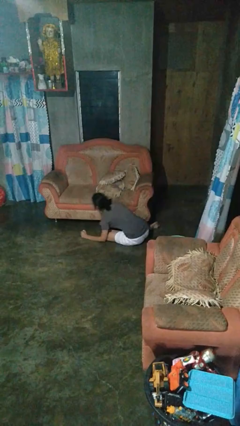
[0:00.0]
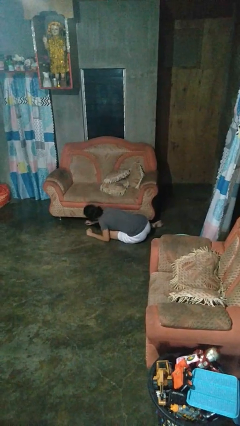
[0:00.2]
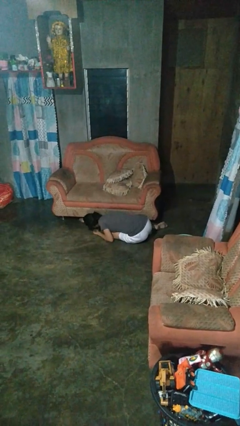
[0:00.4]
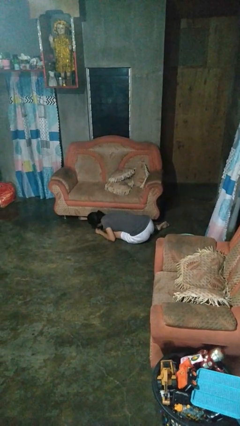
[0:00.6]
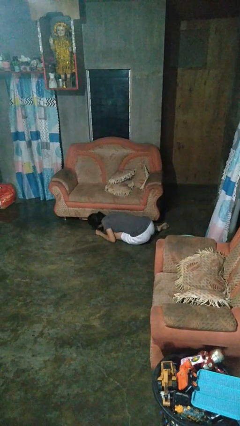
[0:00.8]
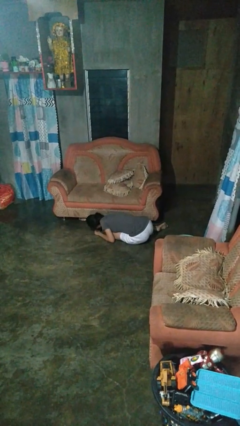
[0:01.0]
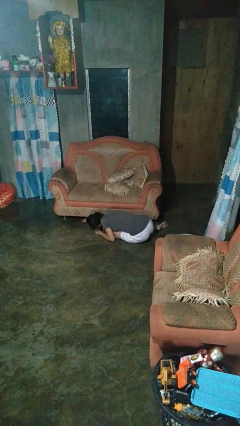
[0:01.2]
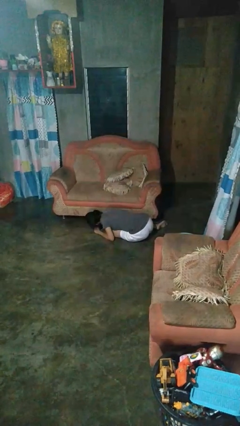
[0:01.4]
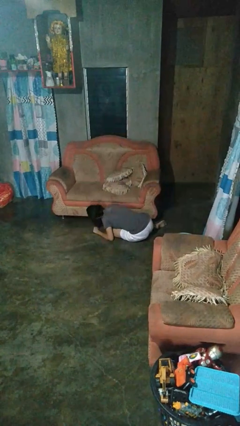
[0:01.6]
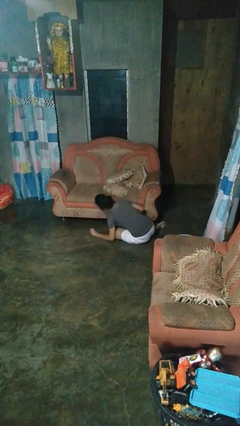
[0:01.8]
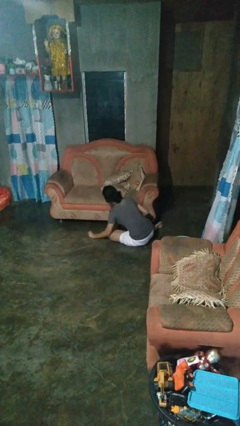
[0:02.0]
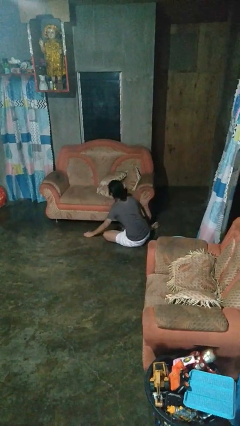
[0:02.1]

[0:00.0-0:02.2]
person searches under couch

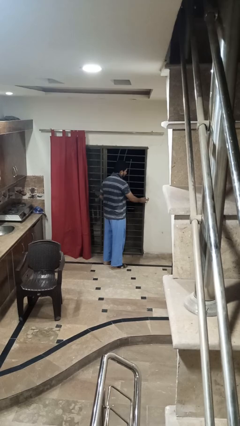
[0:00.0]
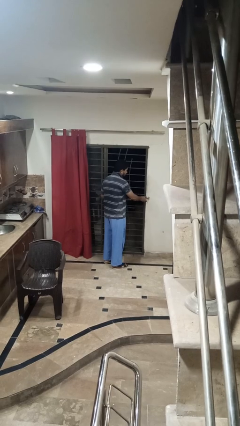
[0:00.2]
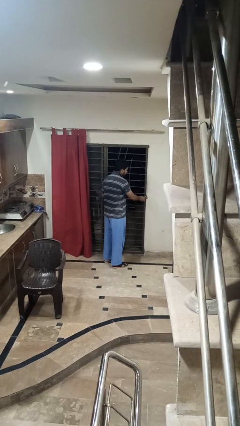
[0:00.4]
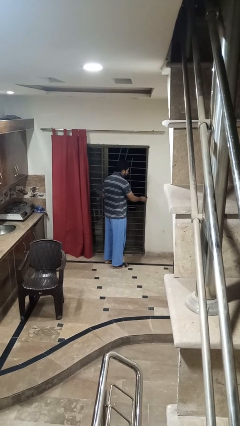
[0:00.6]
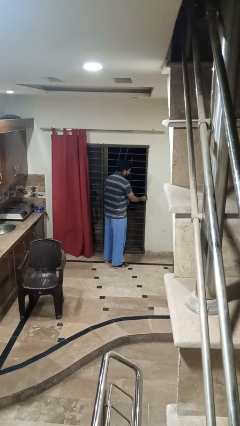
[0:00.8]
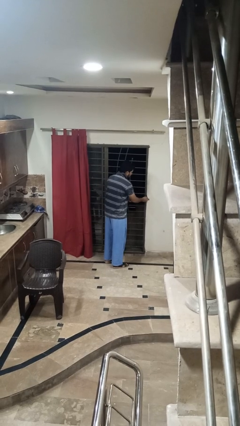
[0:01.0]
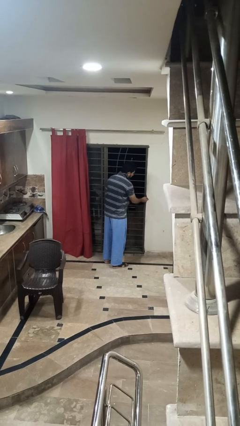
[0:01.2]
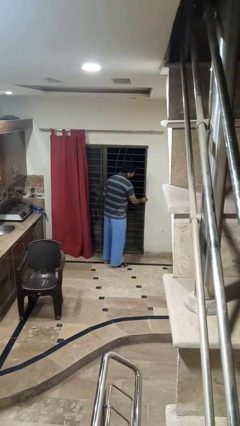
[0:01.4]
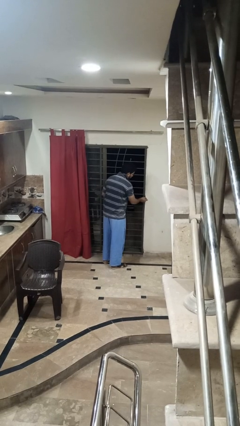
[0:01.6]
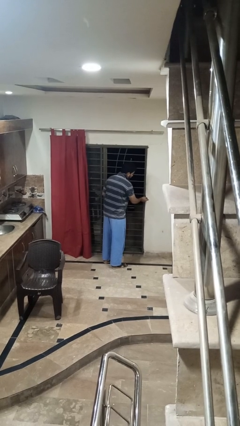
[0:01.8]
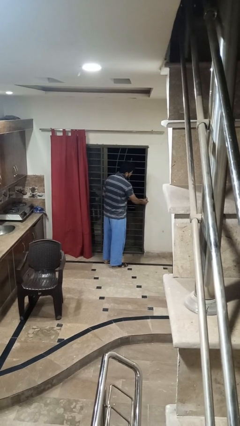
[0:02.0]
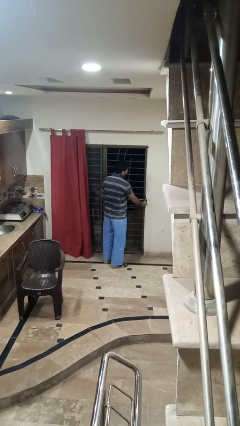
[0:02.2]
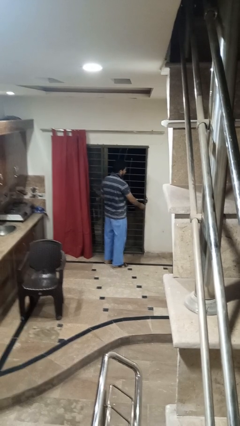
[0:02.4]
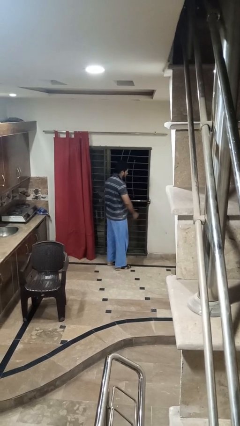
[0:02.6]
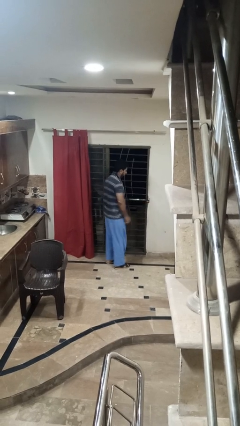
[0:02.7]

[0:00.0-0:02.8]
person locks door with keys

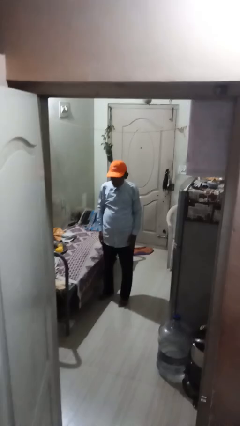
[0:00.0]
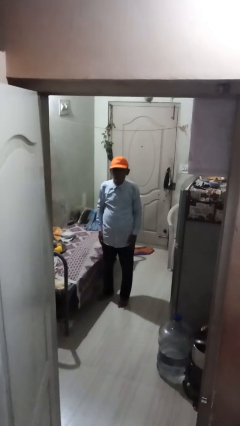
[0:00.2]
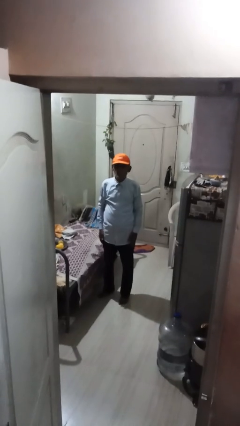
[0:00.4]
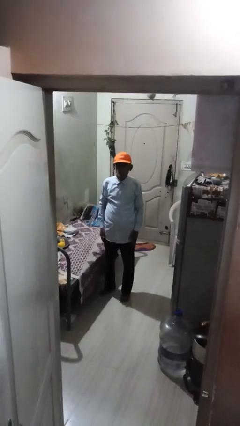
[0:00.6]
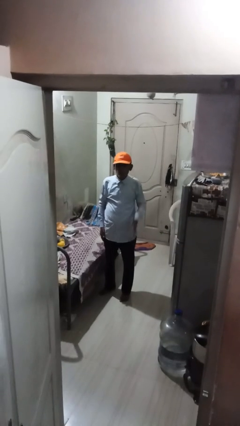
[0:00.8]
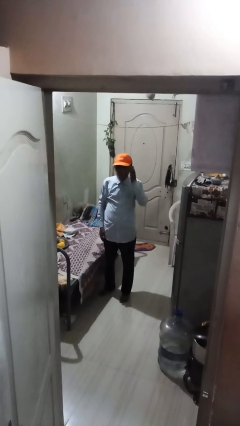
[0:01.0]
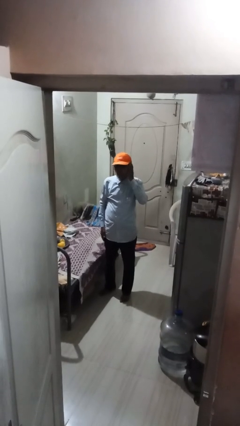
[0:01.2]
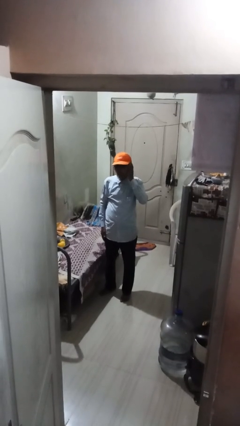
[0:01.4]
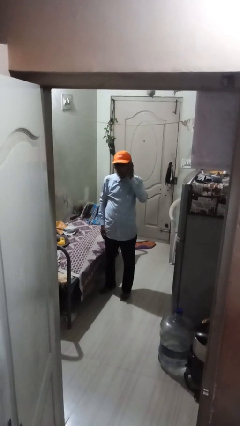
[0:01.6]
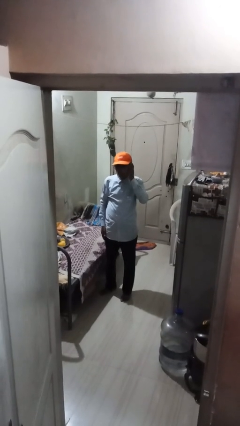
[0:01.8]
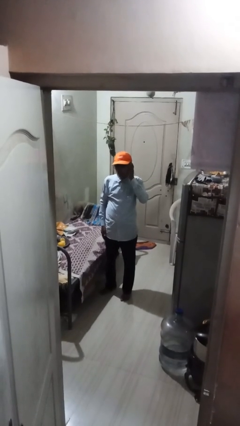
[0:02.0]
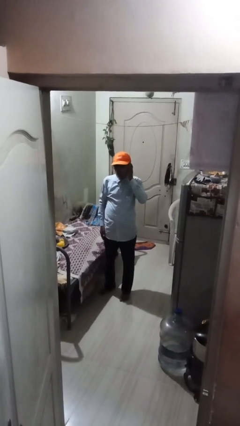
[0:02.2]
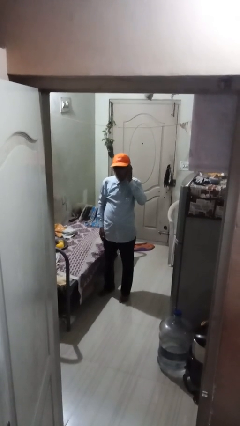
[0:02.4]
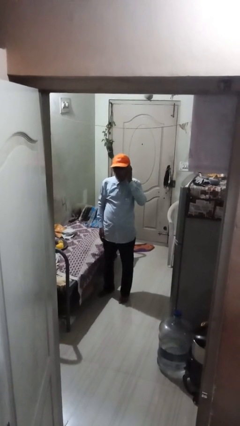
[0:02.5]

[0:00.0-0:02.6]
person gestures listen closely

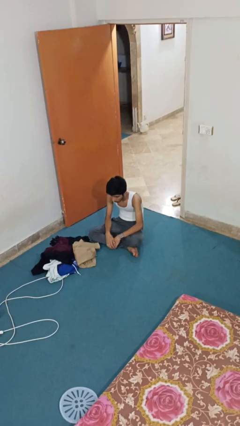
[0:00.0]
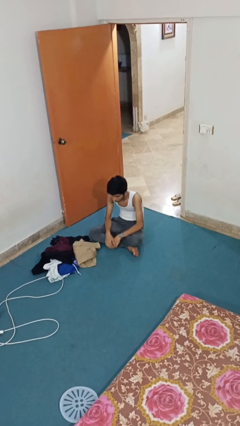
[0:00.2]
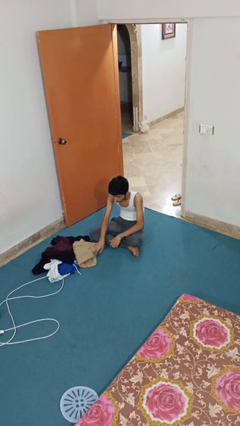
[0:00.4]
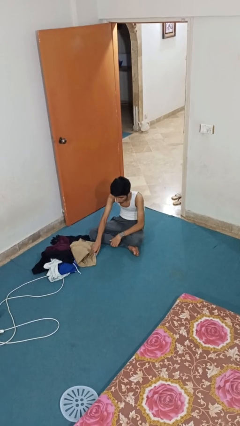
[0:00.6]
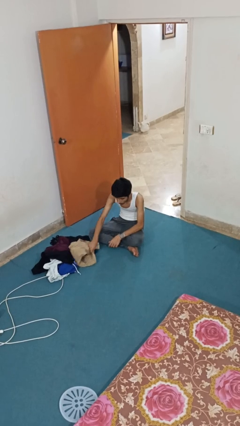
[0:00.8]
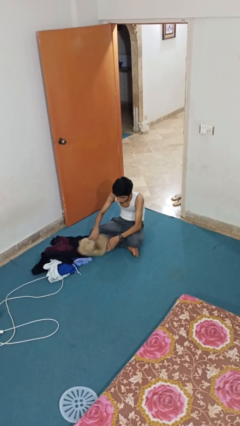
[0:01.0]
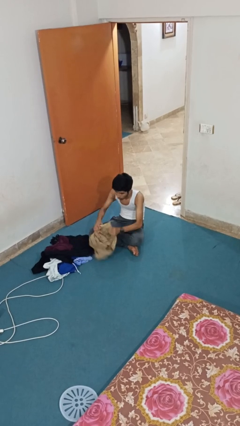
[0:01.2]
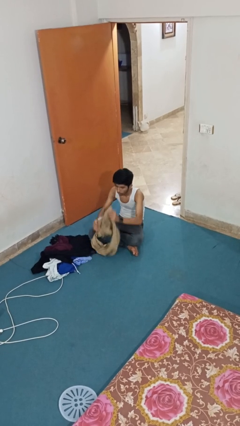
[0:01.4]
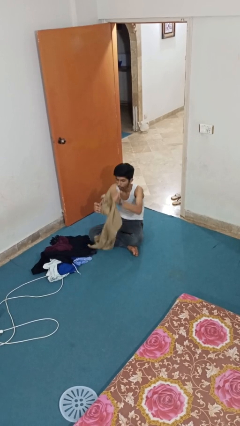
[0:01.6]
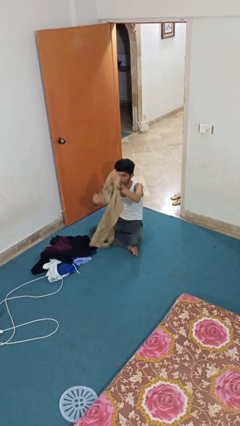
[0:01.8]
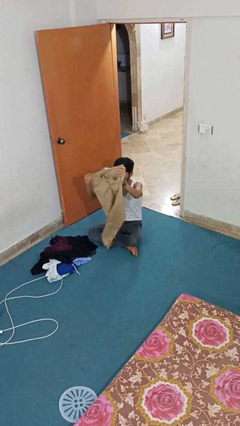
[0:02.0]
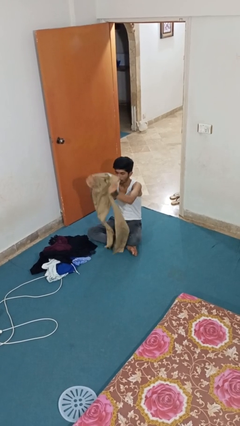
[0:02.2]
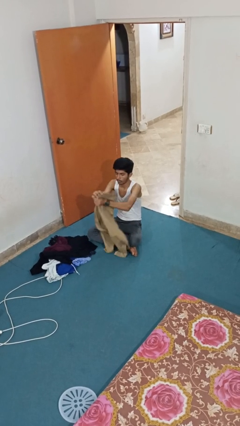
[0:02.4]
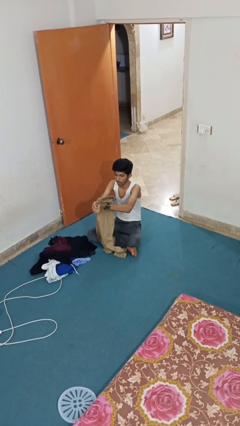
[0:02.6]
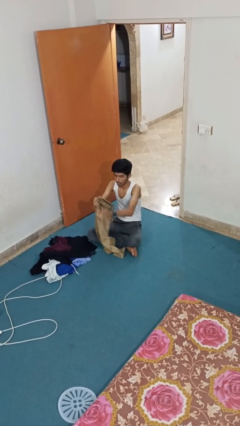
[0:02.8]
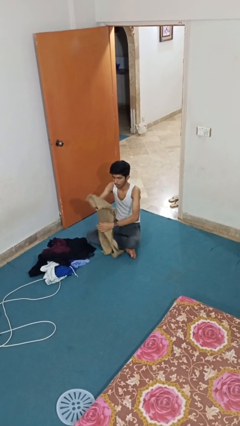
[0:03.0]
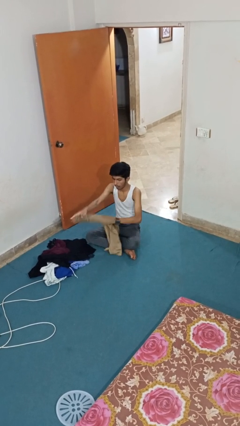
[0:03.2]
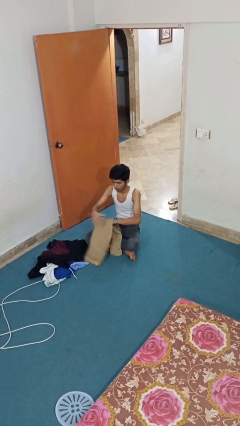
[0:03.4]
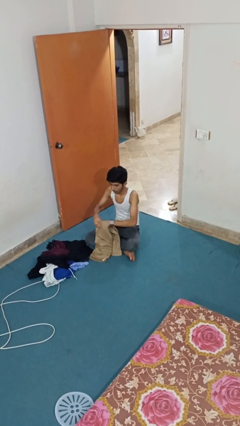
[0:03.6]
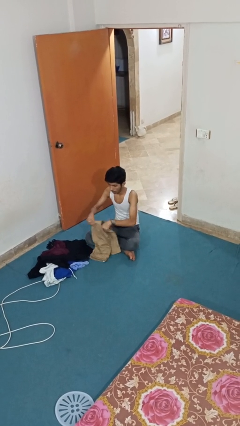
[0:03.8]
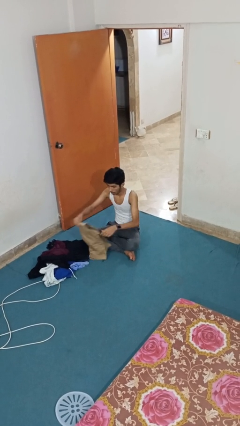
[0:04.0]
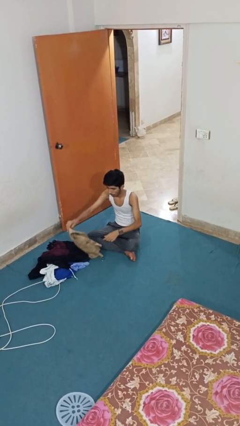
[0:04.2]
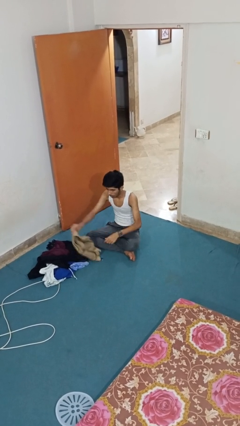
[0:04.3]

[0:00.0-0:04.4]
person folds pants

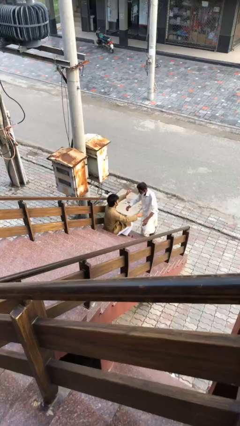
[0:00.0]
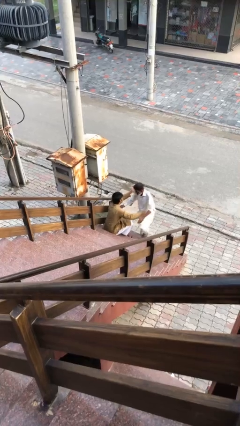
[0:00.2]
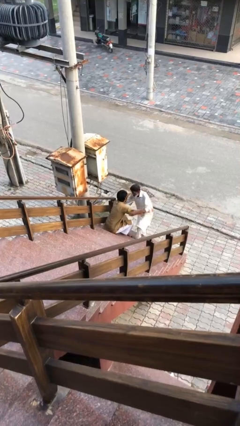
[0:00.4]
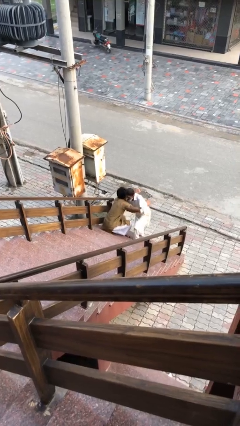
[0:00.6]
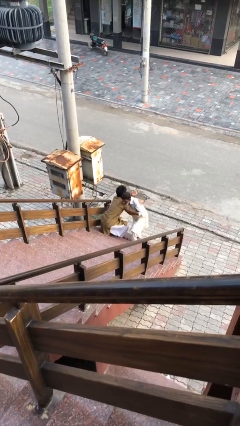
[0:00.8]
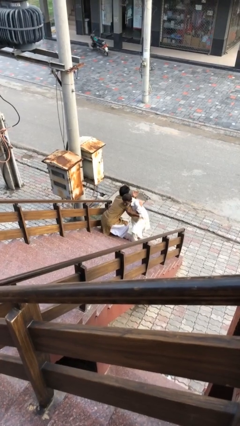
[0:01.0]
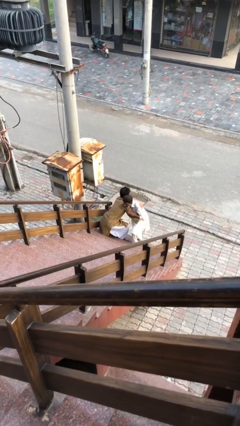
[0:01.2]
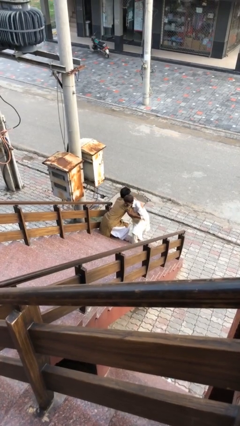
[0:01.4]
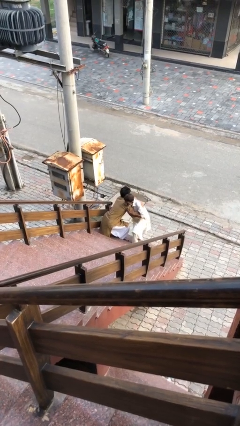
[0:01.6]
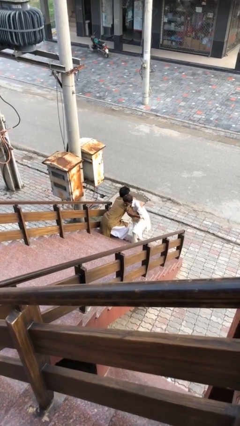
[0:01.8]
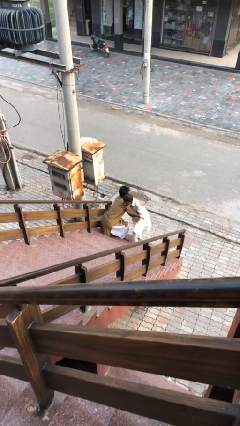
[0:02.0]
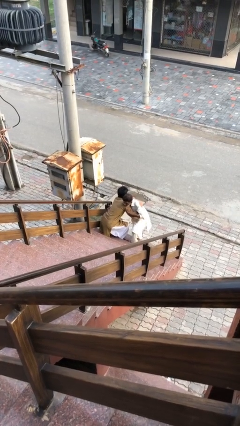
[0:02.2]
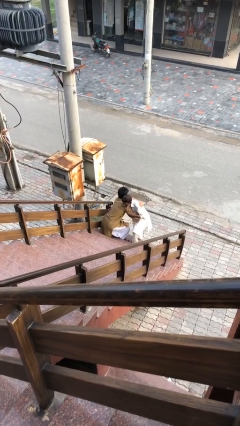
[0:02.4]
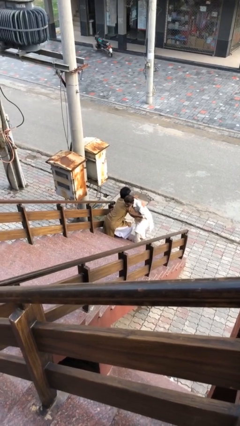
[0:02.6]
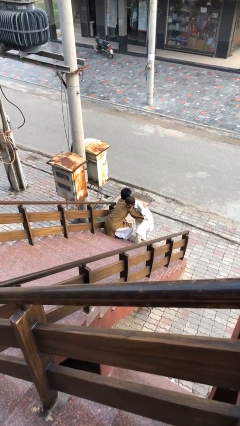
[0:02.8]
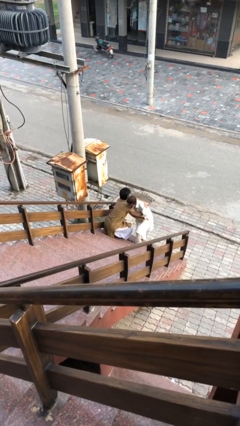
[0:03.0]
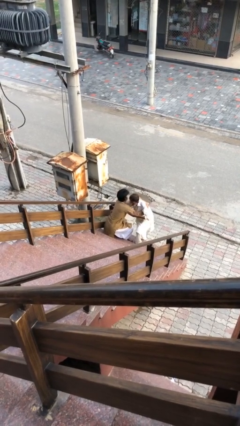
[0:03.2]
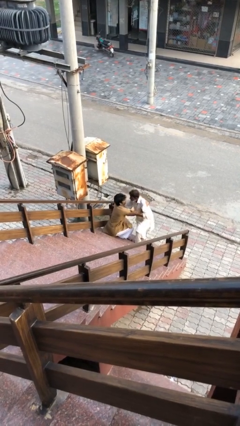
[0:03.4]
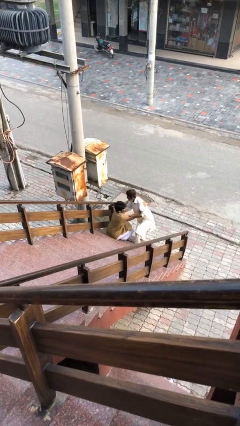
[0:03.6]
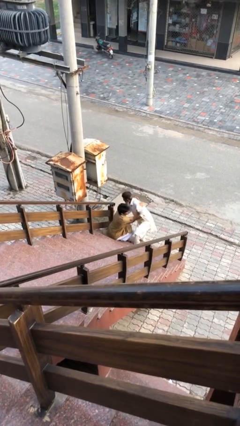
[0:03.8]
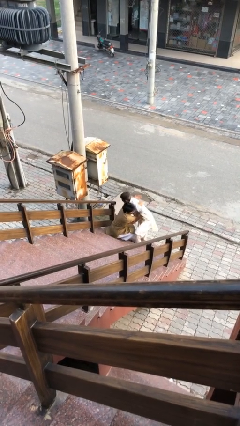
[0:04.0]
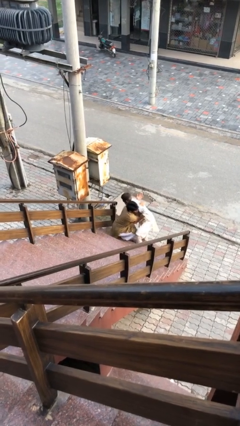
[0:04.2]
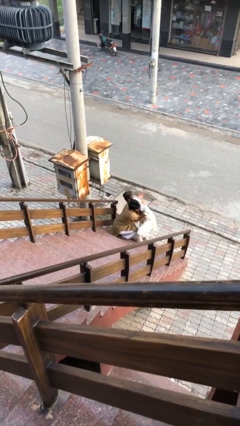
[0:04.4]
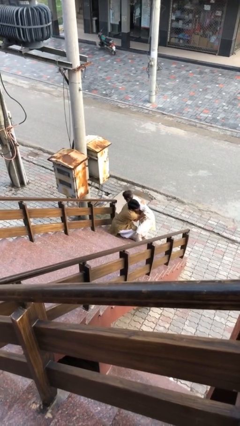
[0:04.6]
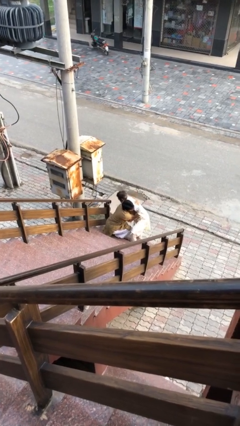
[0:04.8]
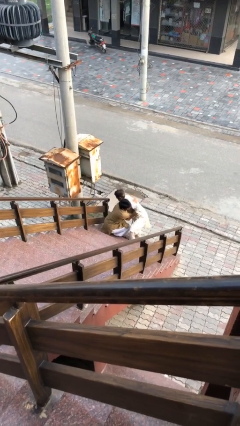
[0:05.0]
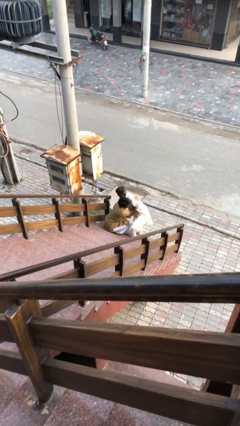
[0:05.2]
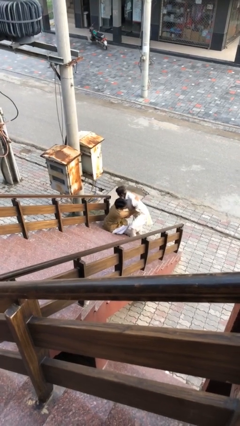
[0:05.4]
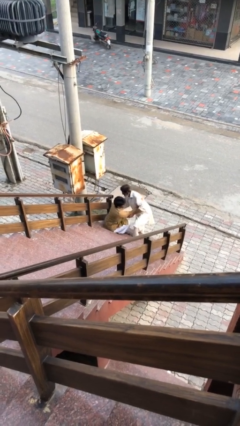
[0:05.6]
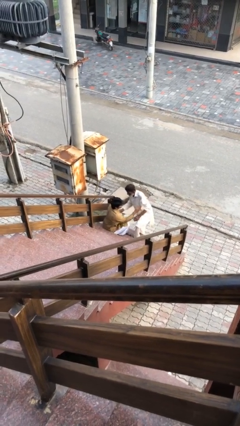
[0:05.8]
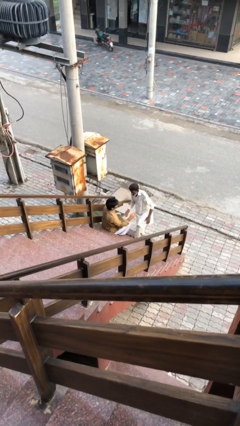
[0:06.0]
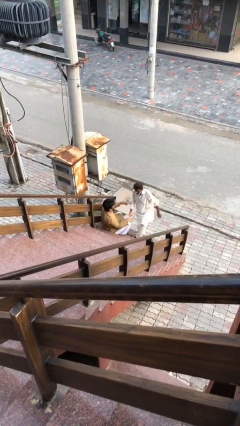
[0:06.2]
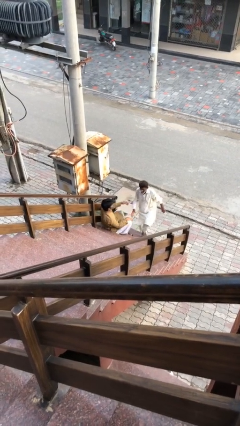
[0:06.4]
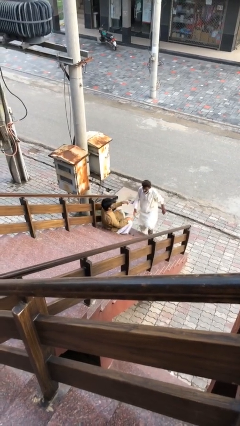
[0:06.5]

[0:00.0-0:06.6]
person embraces person
